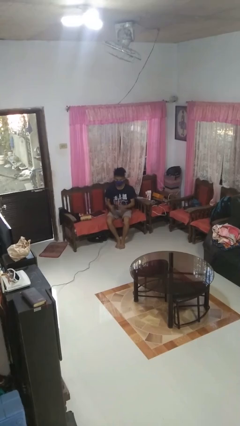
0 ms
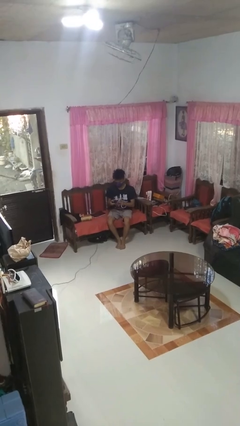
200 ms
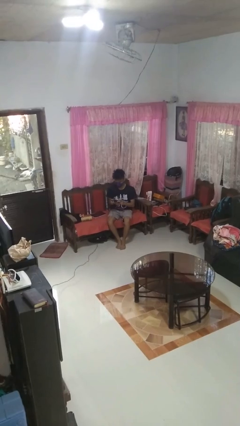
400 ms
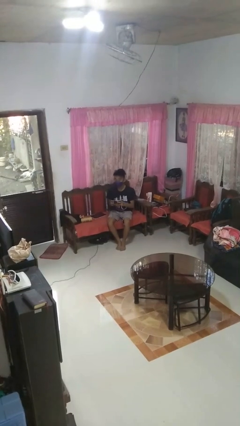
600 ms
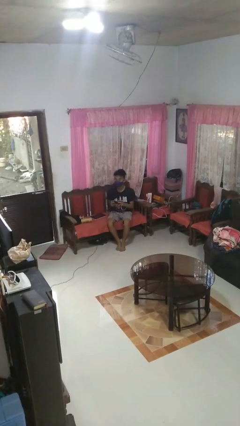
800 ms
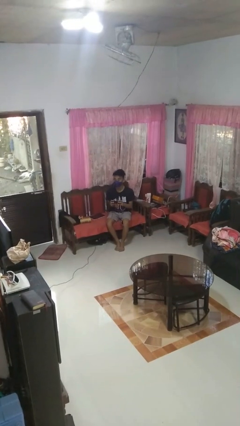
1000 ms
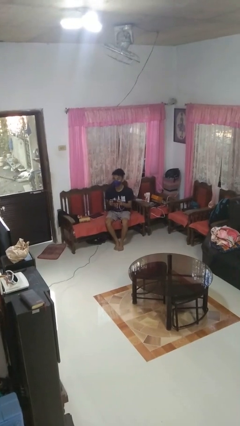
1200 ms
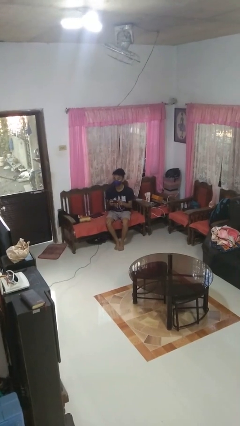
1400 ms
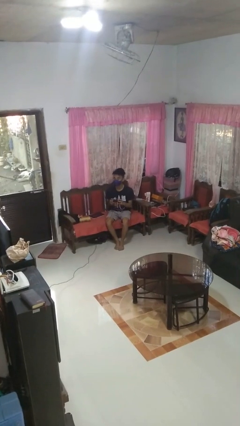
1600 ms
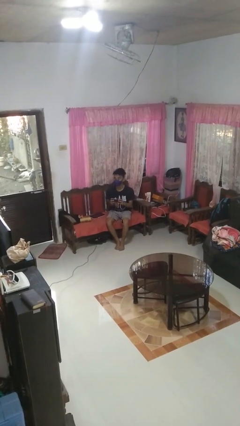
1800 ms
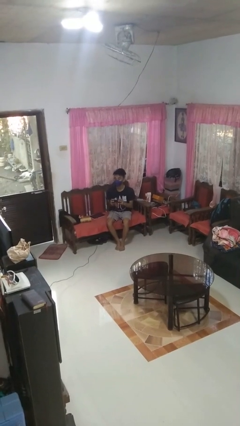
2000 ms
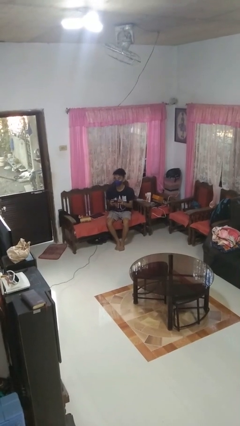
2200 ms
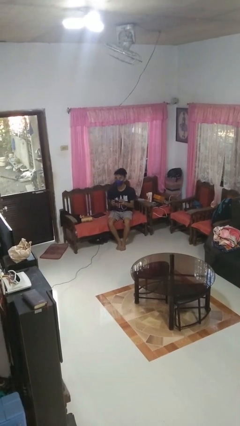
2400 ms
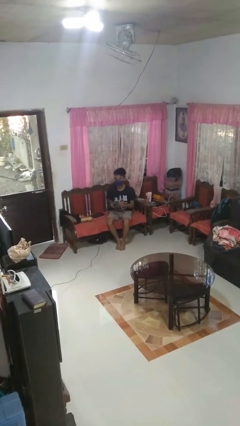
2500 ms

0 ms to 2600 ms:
person interacts with handheld game

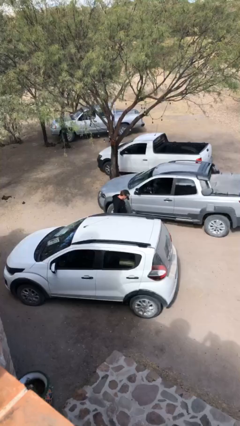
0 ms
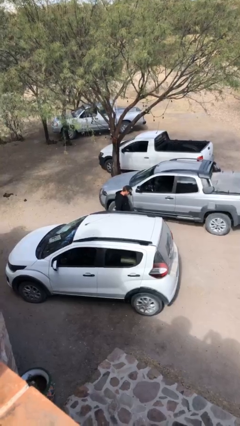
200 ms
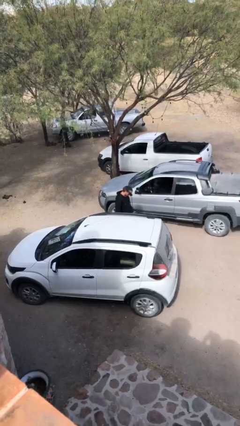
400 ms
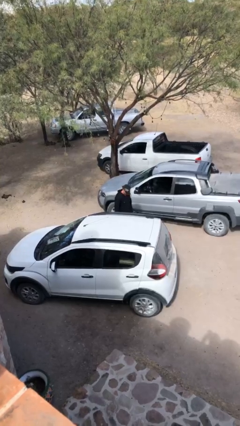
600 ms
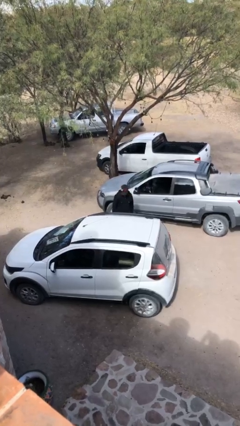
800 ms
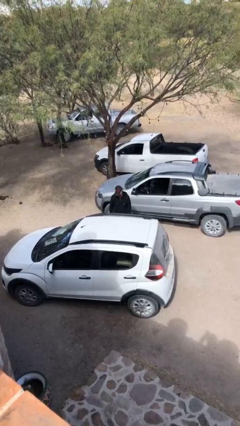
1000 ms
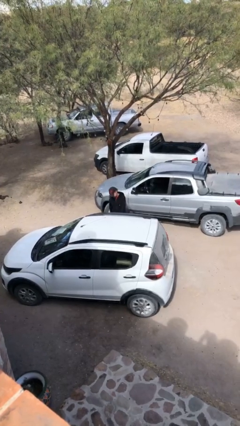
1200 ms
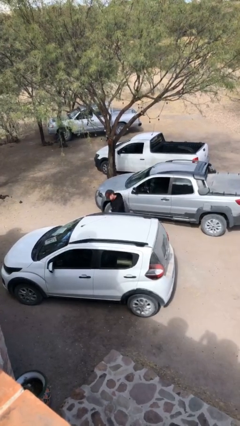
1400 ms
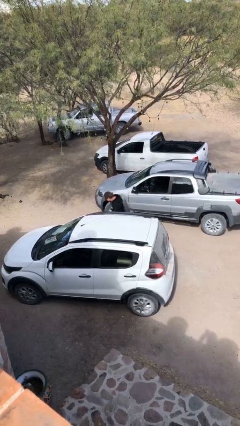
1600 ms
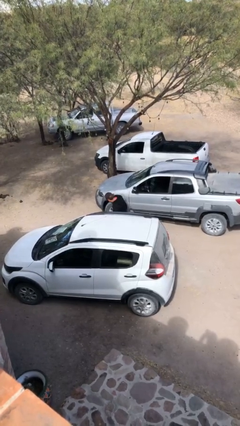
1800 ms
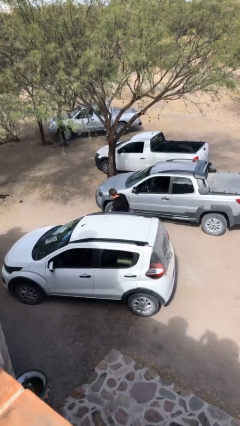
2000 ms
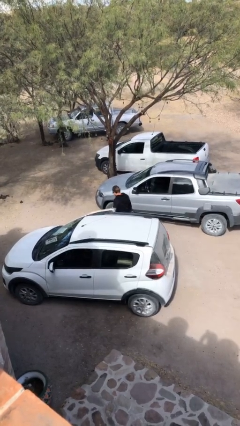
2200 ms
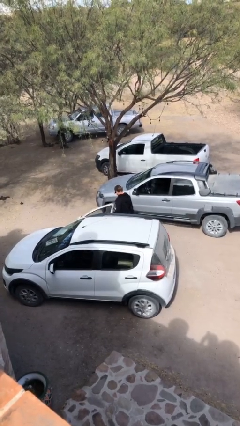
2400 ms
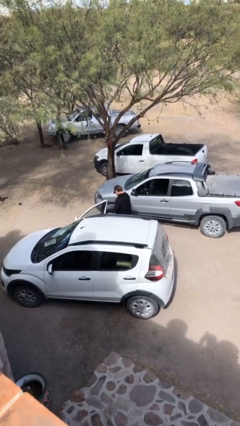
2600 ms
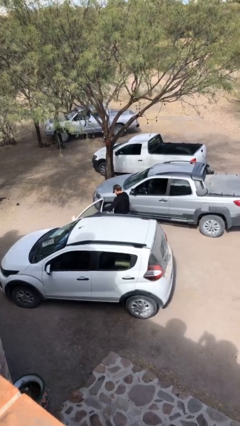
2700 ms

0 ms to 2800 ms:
person opens car door

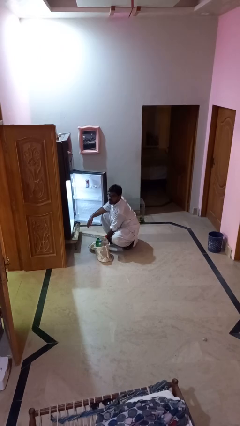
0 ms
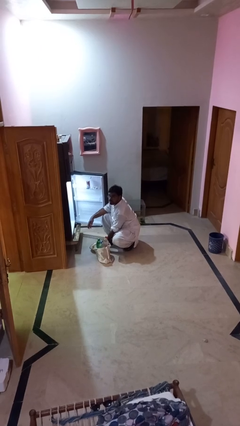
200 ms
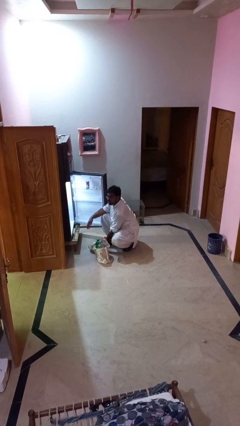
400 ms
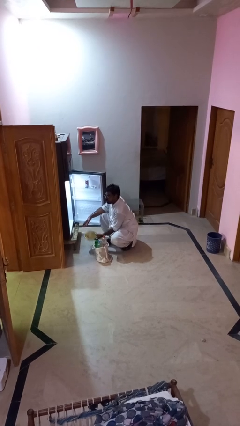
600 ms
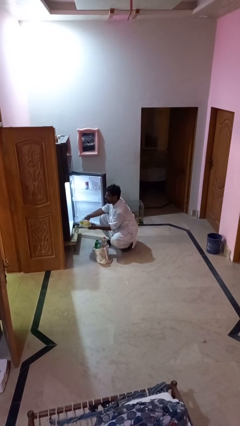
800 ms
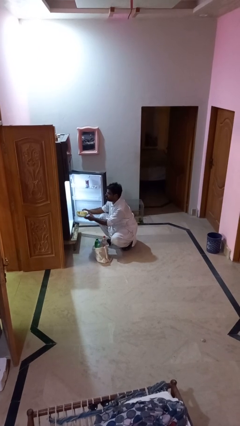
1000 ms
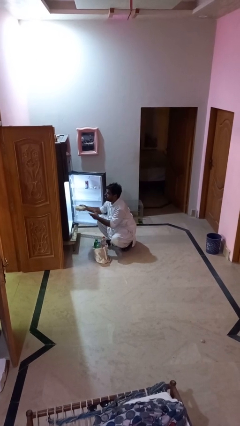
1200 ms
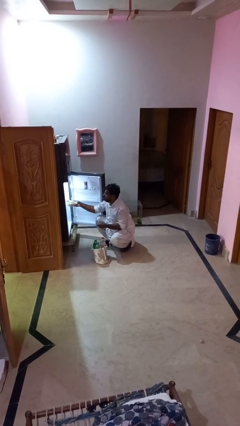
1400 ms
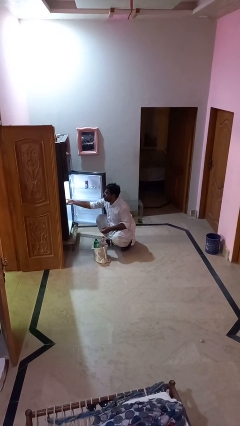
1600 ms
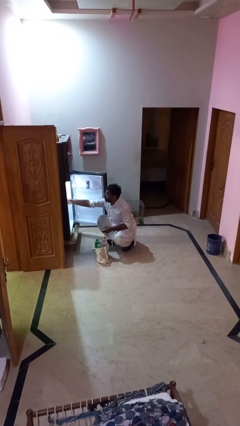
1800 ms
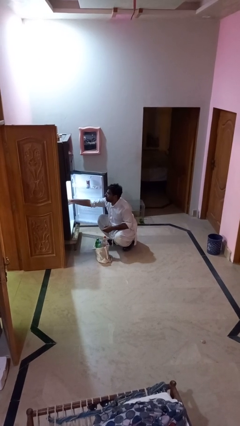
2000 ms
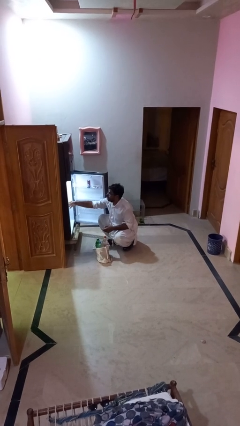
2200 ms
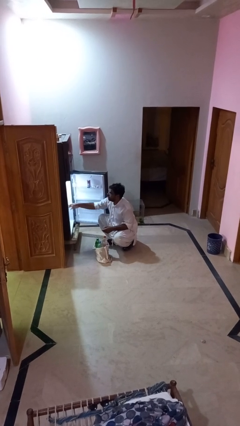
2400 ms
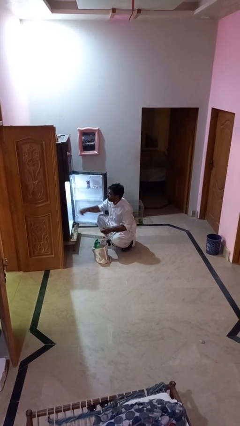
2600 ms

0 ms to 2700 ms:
person loads groceries into refrigerator

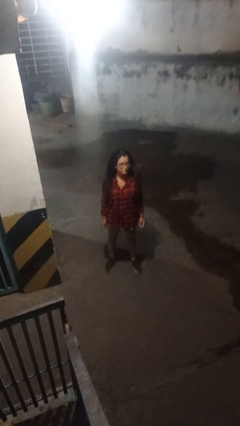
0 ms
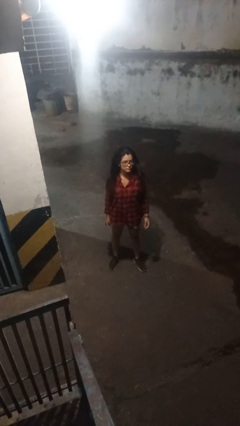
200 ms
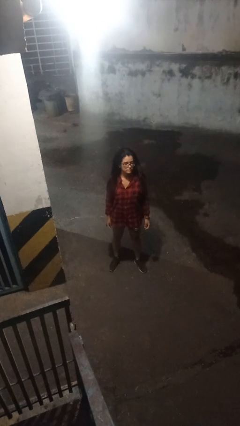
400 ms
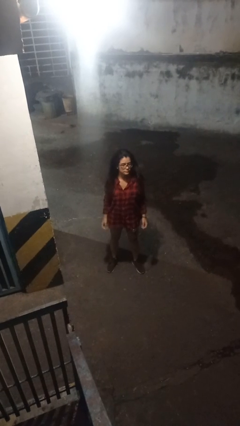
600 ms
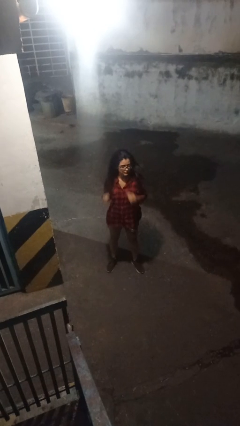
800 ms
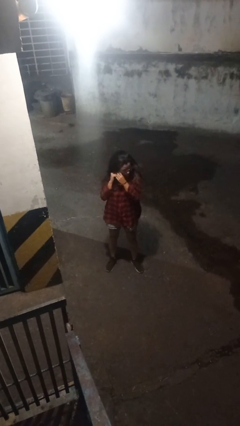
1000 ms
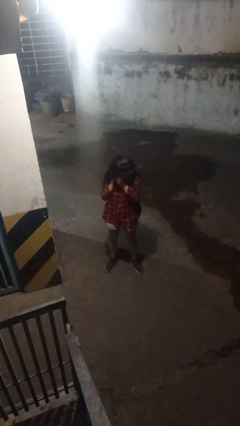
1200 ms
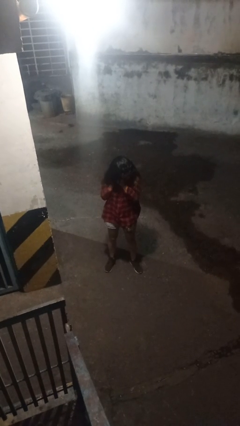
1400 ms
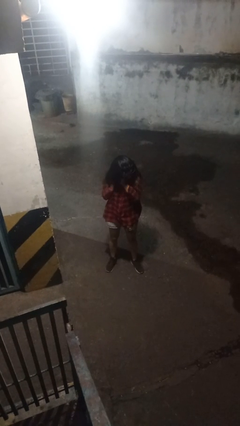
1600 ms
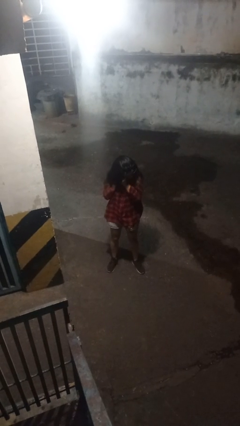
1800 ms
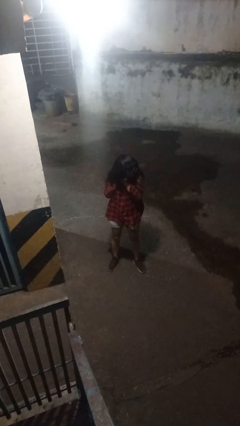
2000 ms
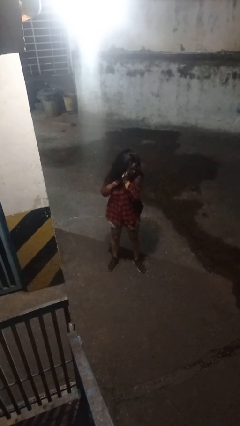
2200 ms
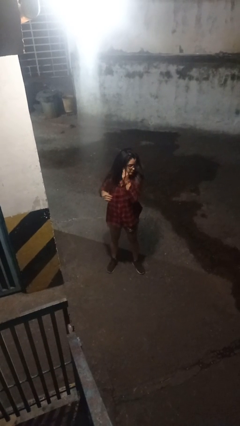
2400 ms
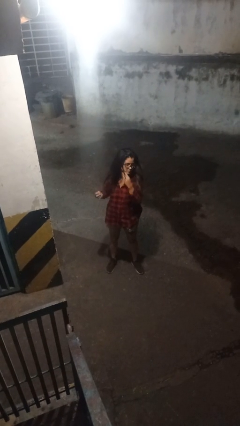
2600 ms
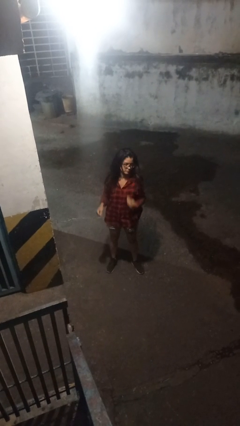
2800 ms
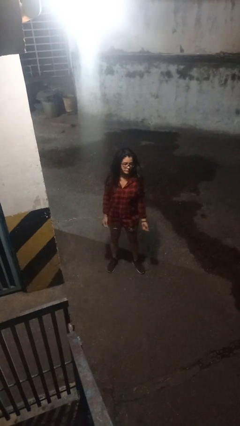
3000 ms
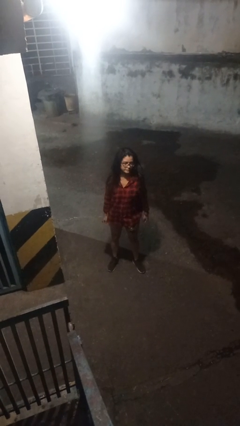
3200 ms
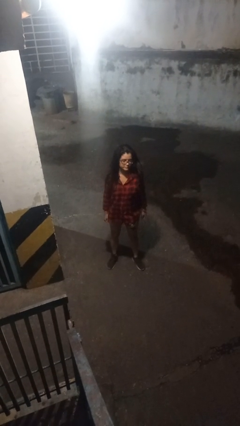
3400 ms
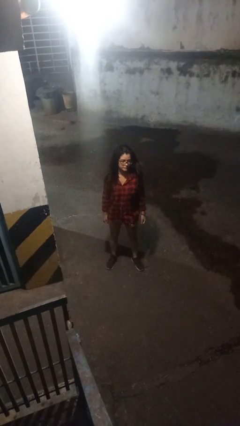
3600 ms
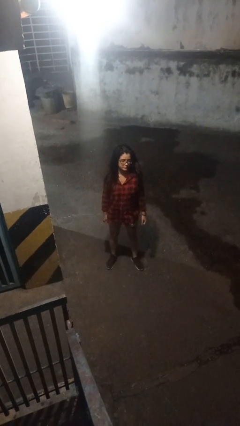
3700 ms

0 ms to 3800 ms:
person takes off earrings

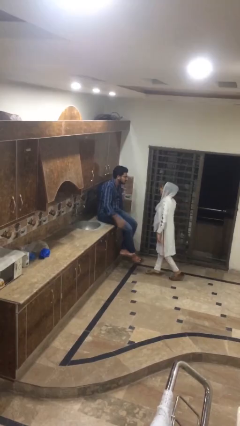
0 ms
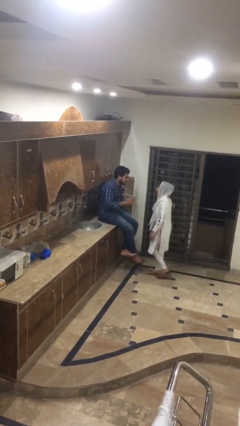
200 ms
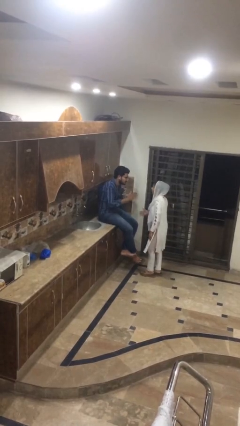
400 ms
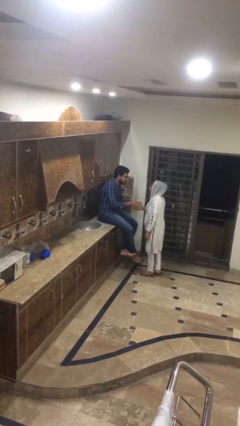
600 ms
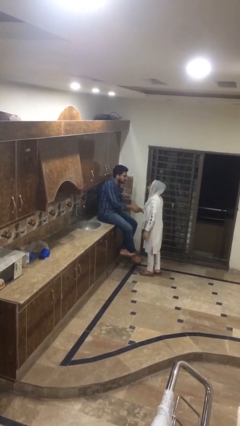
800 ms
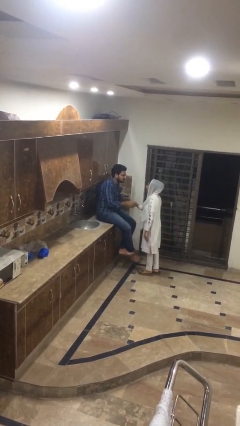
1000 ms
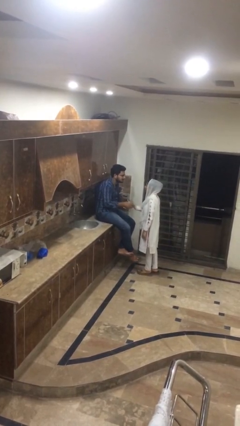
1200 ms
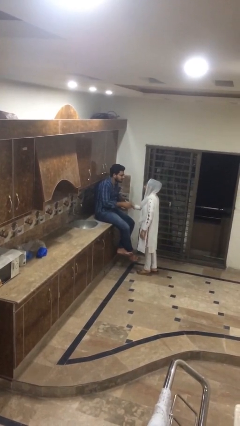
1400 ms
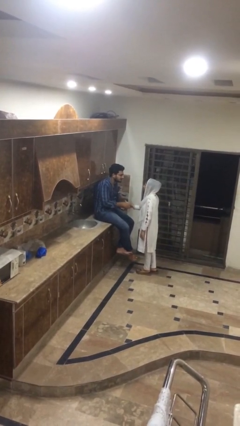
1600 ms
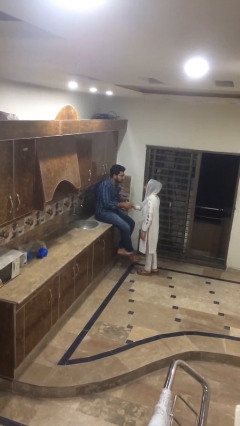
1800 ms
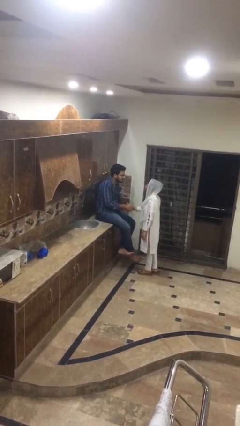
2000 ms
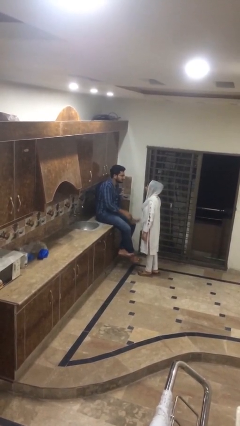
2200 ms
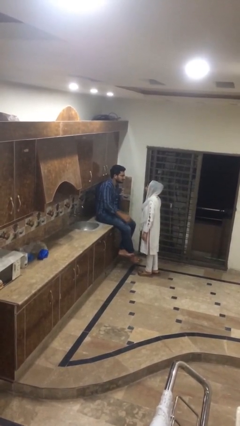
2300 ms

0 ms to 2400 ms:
person shakes hand

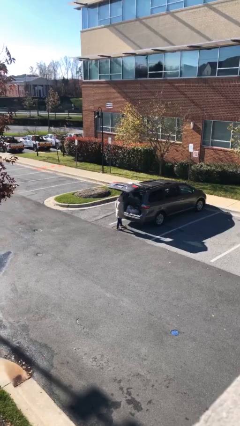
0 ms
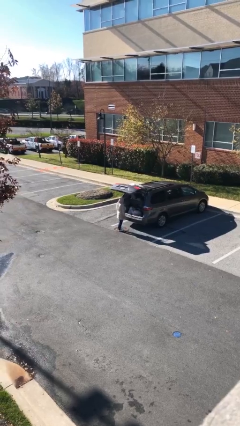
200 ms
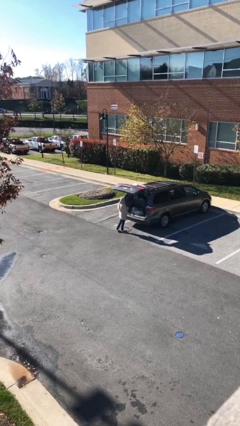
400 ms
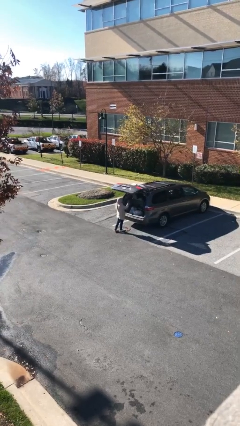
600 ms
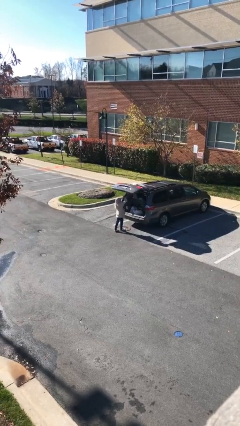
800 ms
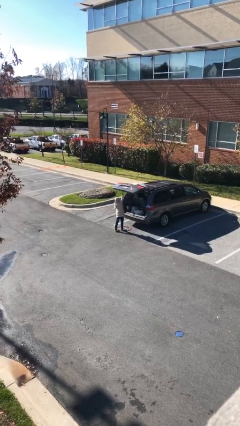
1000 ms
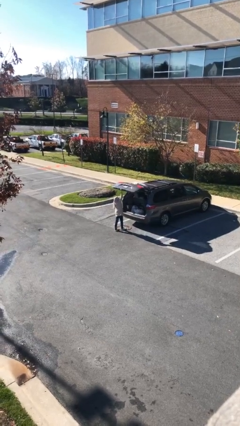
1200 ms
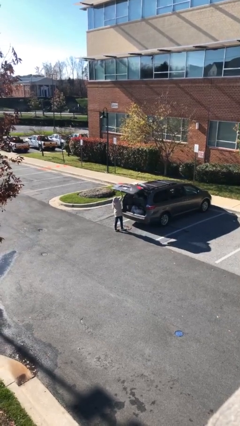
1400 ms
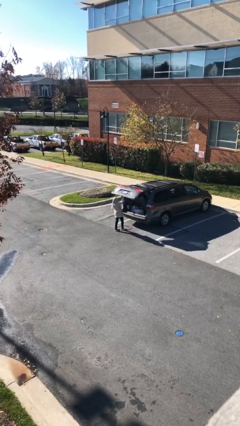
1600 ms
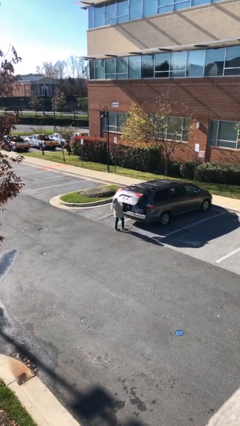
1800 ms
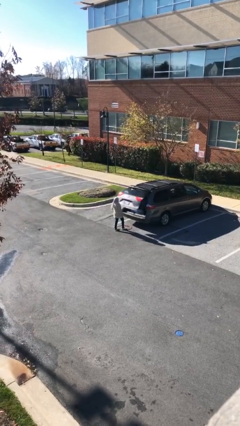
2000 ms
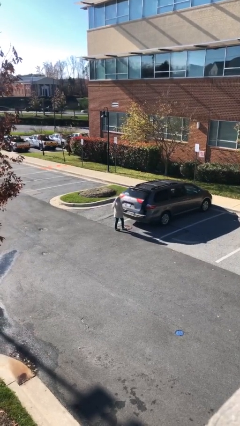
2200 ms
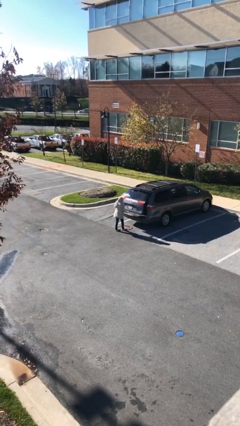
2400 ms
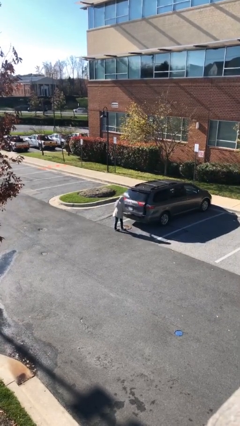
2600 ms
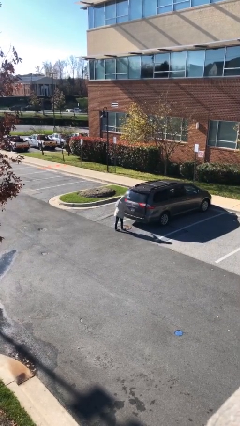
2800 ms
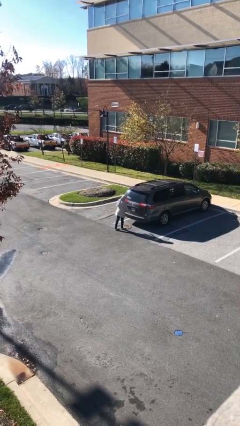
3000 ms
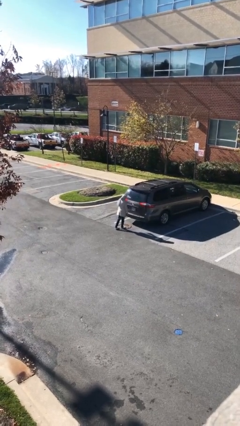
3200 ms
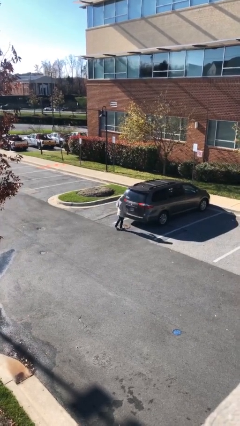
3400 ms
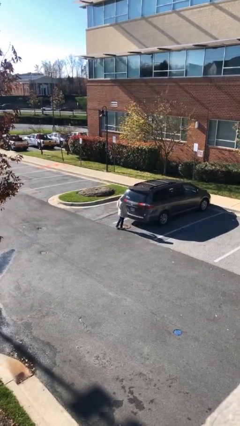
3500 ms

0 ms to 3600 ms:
person closes car trunk
